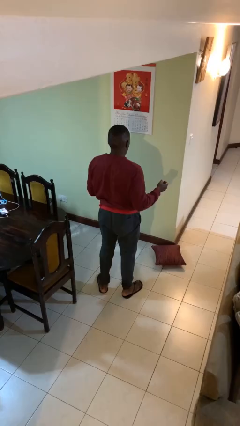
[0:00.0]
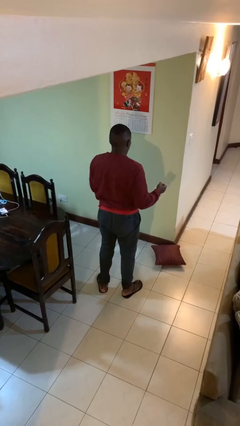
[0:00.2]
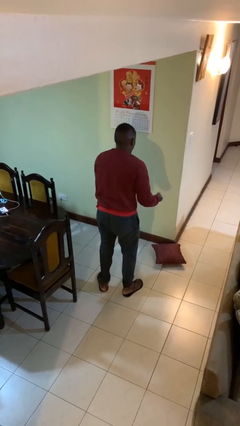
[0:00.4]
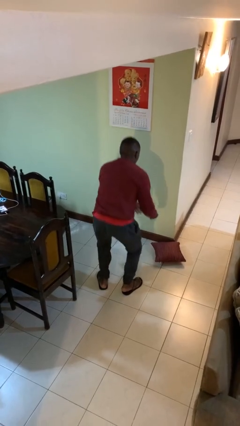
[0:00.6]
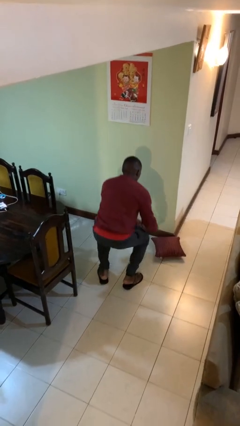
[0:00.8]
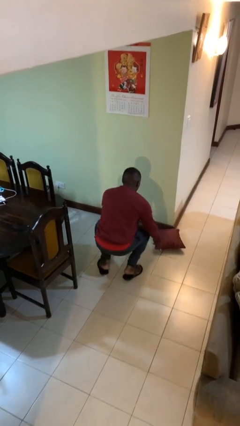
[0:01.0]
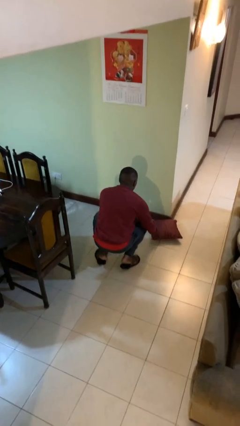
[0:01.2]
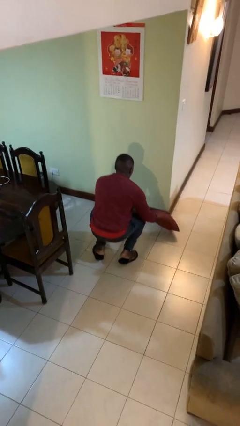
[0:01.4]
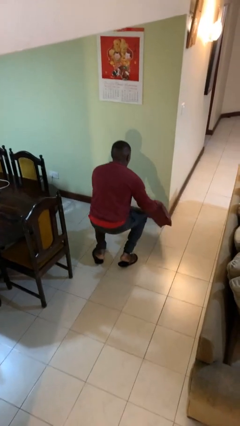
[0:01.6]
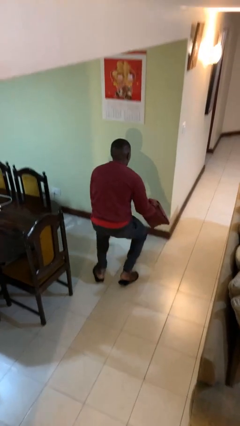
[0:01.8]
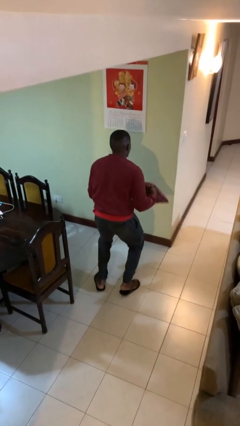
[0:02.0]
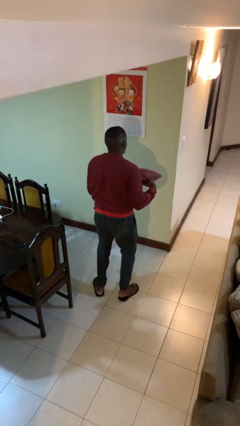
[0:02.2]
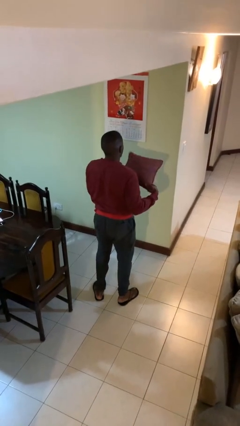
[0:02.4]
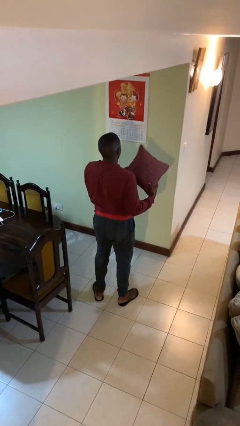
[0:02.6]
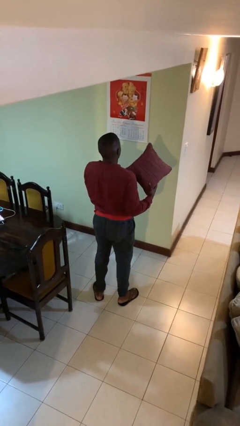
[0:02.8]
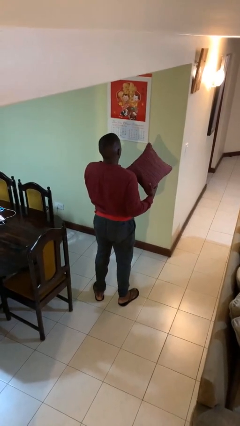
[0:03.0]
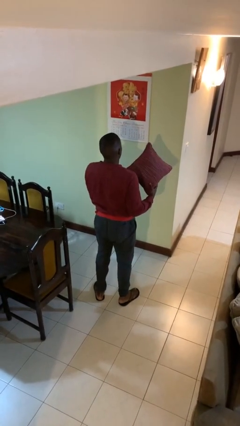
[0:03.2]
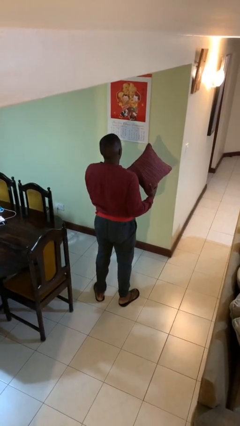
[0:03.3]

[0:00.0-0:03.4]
person picks up object from floor

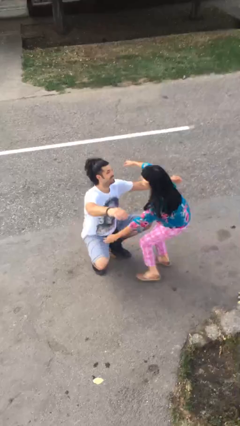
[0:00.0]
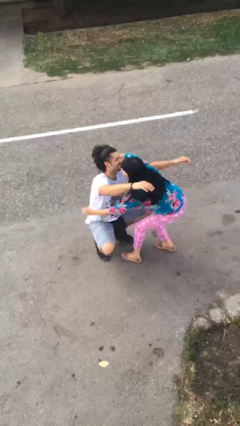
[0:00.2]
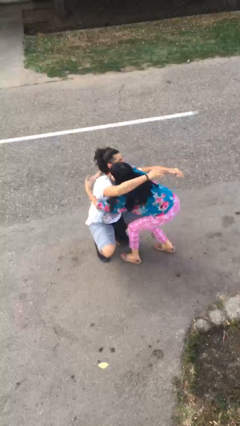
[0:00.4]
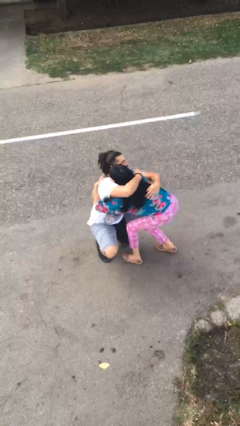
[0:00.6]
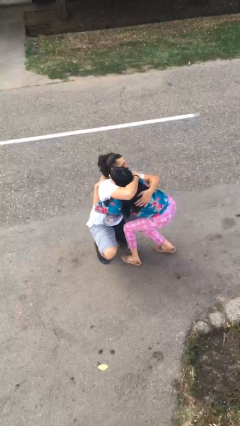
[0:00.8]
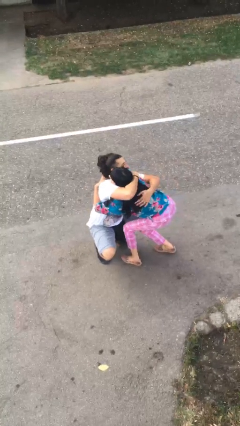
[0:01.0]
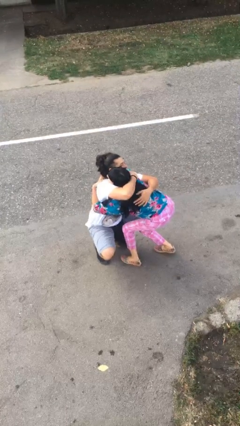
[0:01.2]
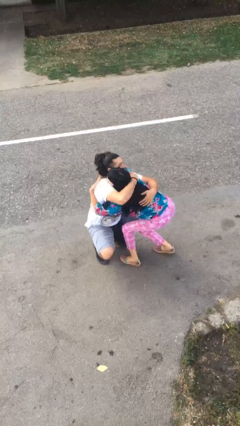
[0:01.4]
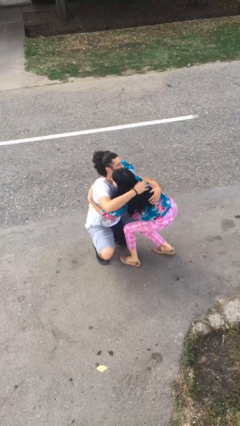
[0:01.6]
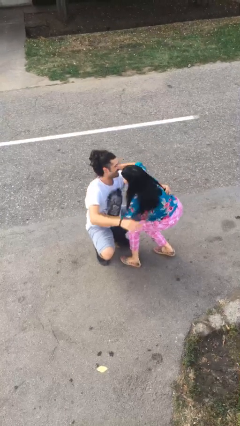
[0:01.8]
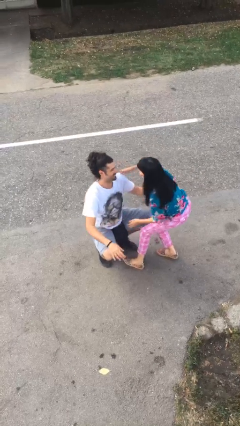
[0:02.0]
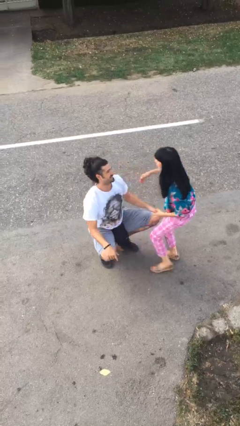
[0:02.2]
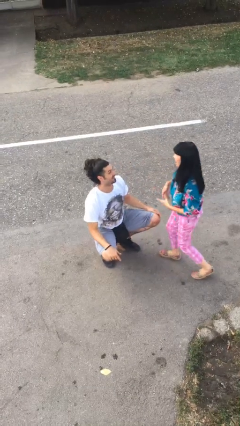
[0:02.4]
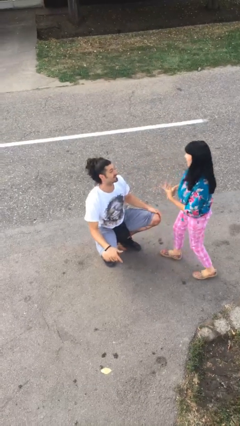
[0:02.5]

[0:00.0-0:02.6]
person embraces person

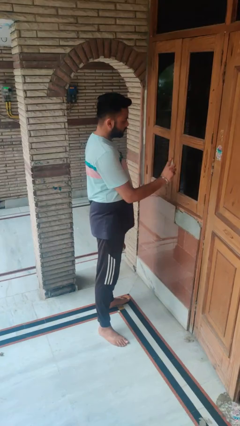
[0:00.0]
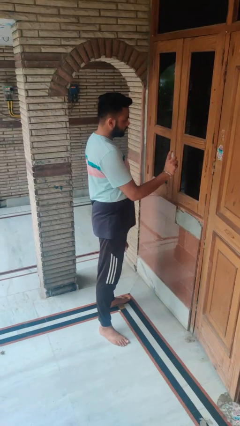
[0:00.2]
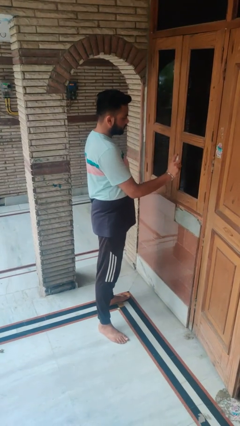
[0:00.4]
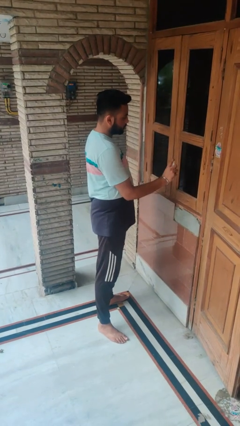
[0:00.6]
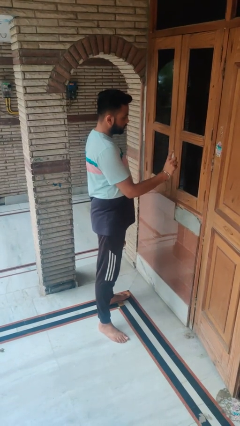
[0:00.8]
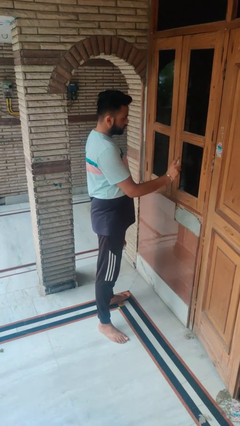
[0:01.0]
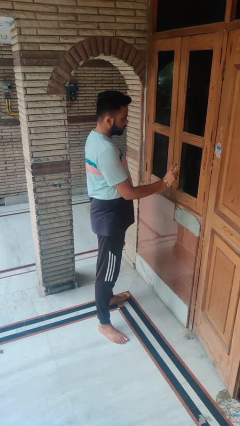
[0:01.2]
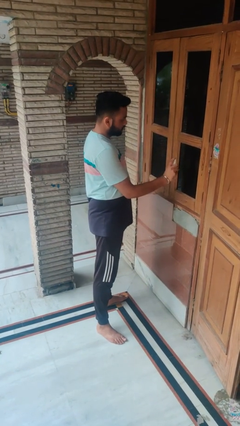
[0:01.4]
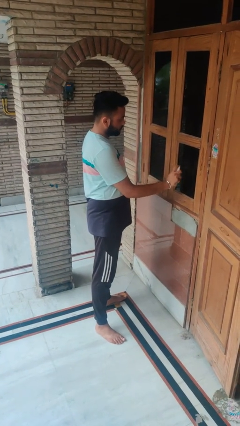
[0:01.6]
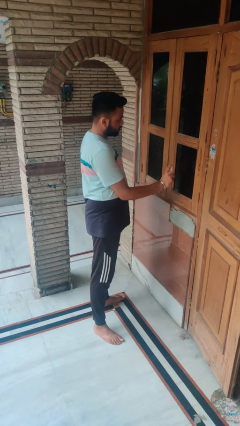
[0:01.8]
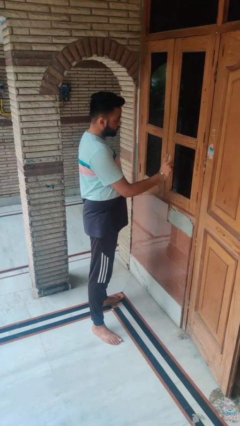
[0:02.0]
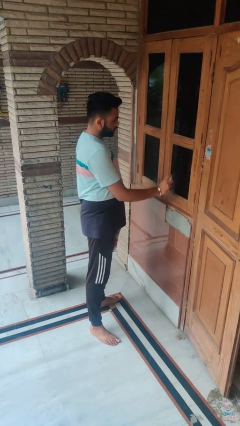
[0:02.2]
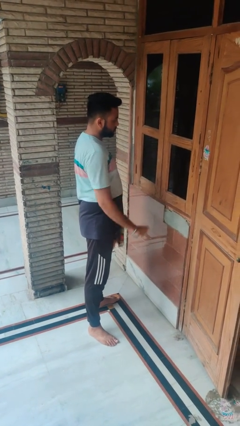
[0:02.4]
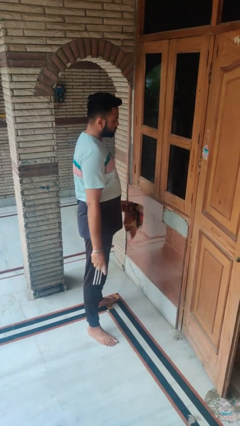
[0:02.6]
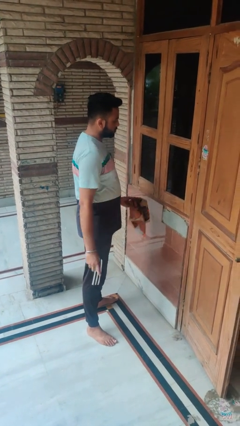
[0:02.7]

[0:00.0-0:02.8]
person sprays from bottle

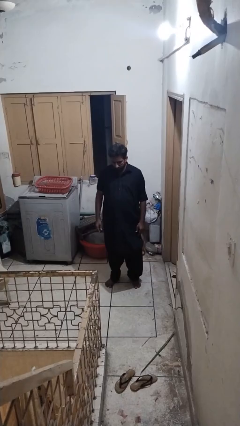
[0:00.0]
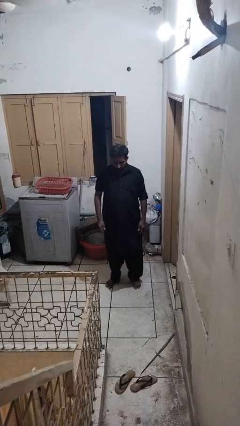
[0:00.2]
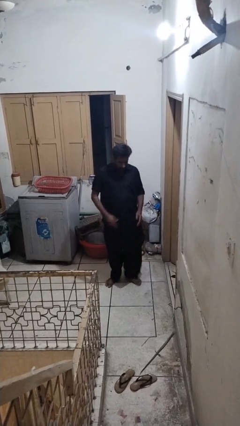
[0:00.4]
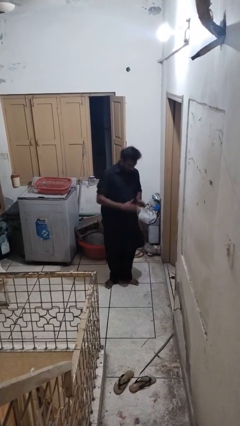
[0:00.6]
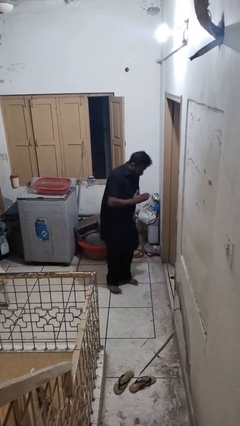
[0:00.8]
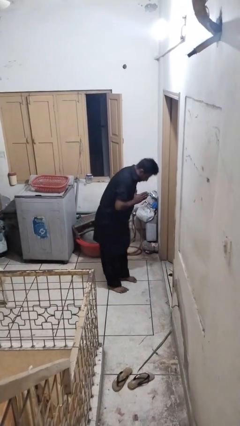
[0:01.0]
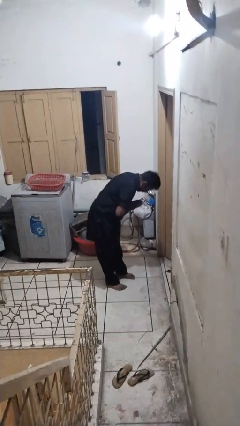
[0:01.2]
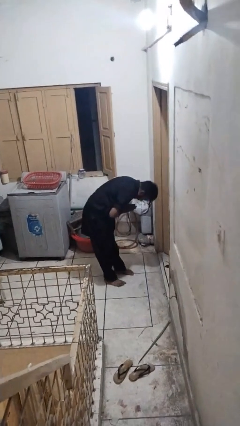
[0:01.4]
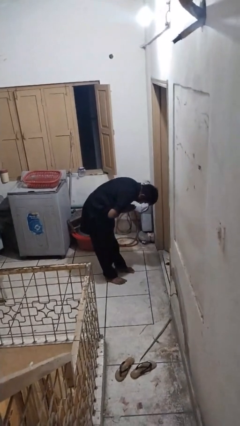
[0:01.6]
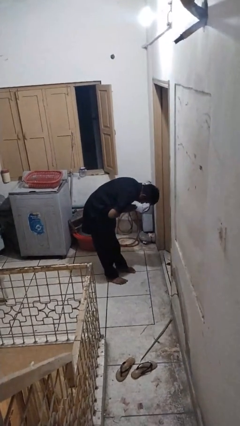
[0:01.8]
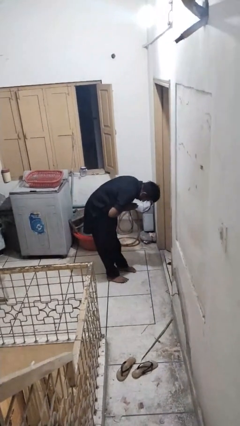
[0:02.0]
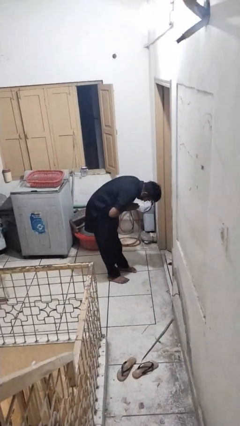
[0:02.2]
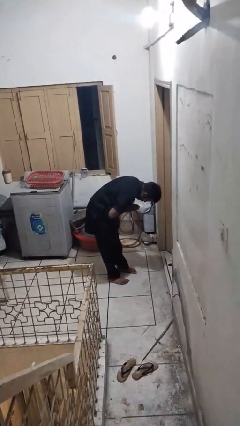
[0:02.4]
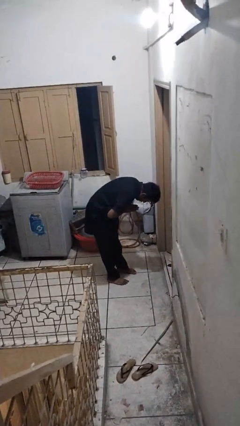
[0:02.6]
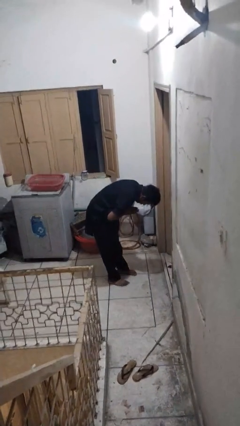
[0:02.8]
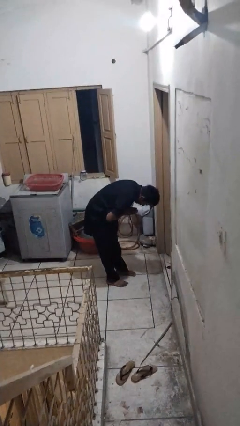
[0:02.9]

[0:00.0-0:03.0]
person bows

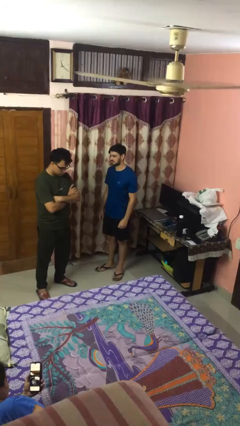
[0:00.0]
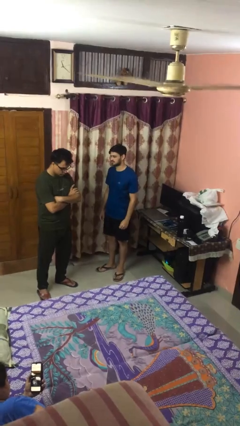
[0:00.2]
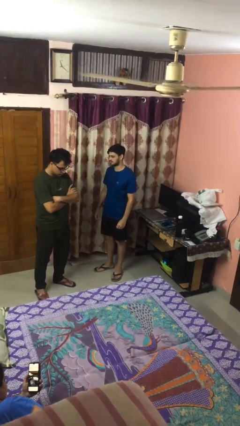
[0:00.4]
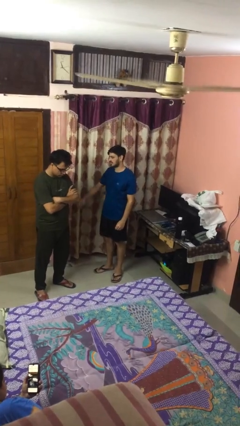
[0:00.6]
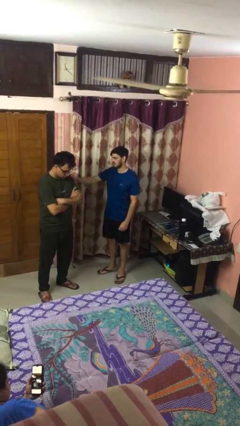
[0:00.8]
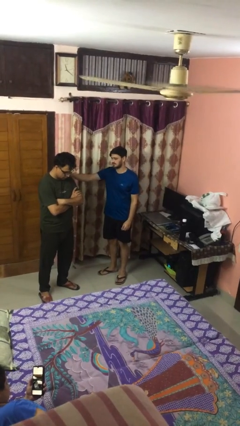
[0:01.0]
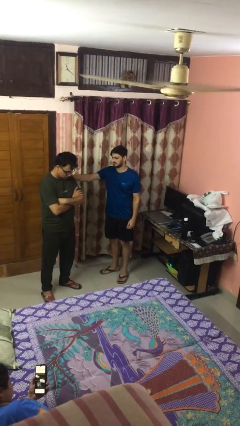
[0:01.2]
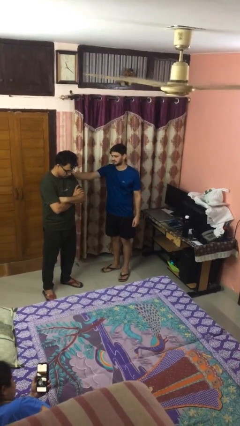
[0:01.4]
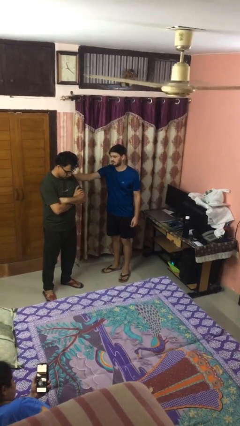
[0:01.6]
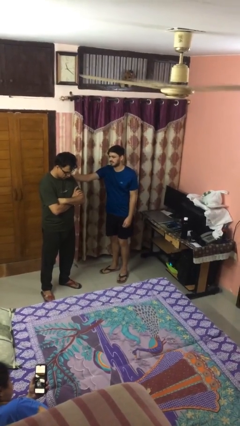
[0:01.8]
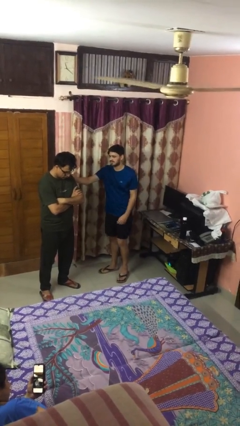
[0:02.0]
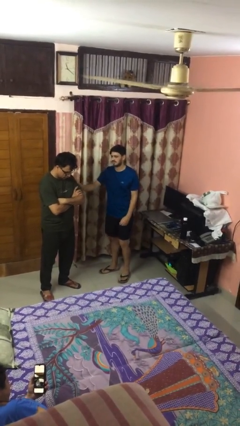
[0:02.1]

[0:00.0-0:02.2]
person pounds shoulders of person

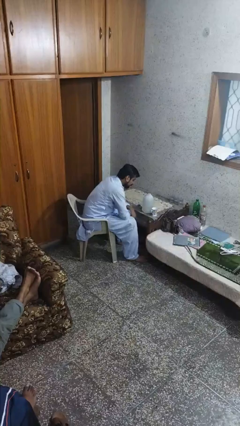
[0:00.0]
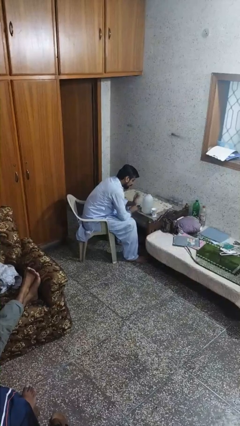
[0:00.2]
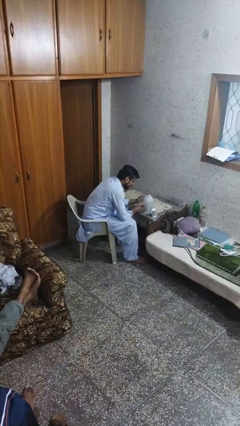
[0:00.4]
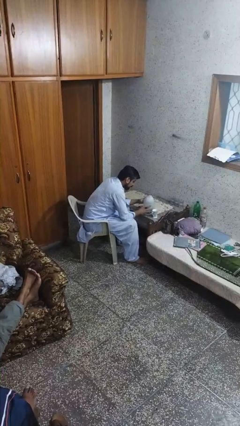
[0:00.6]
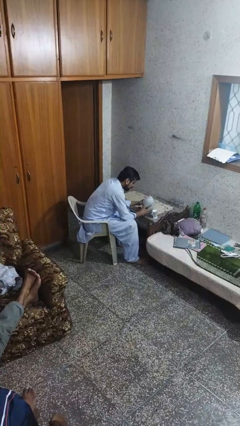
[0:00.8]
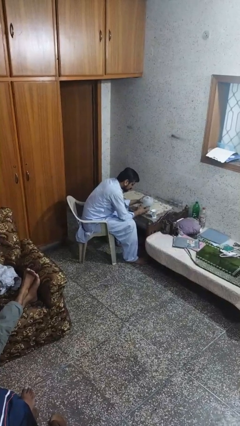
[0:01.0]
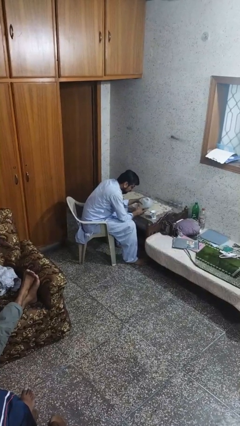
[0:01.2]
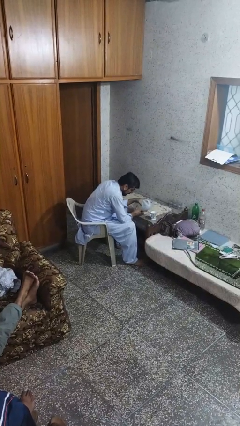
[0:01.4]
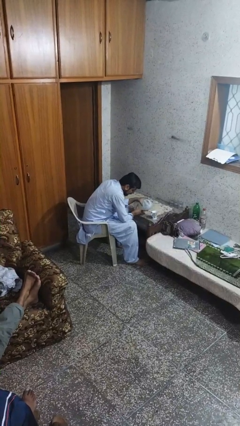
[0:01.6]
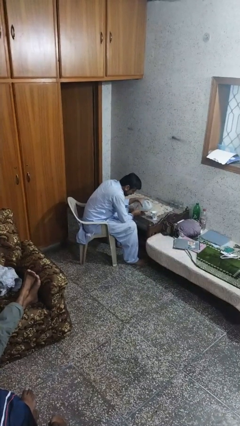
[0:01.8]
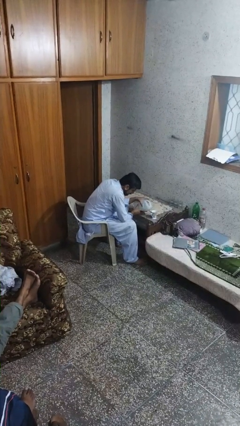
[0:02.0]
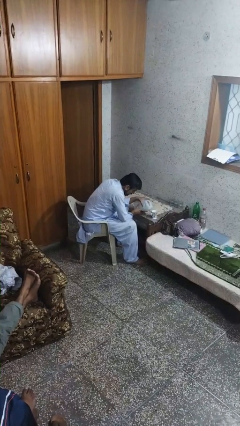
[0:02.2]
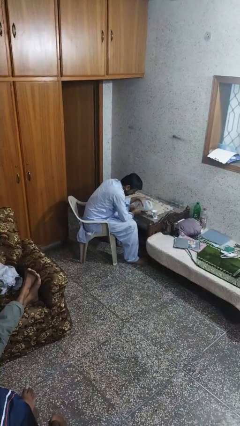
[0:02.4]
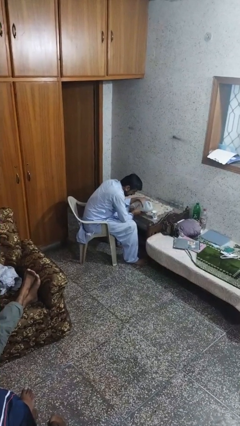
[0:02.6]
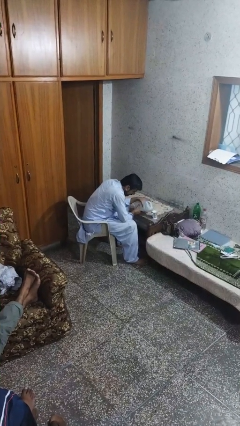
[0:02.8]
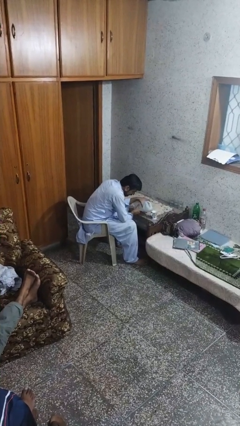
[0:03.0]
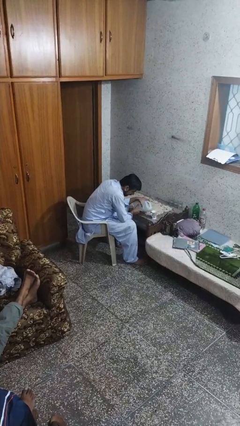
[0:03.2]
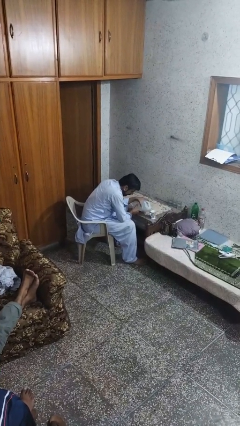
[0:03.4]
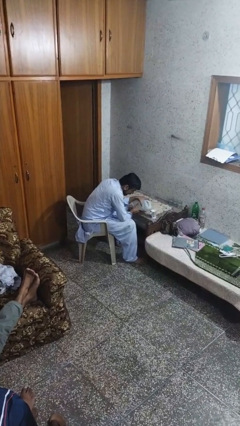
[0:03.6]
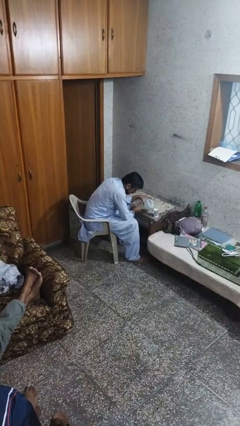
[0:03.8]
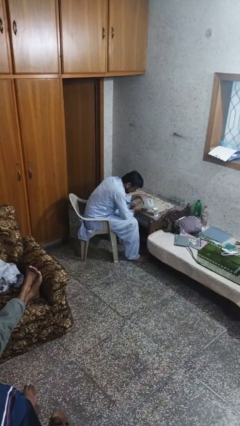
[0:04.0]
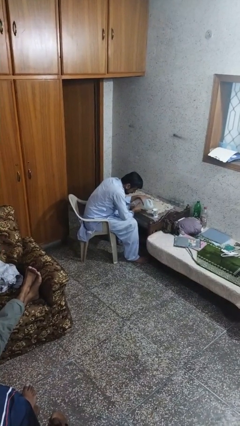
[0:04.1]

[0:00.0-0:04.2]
person pours liquid into cup
